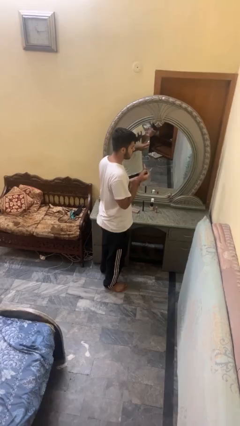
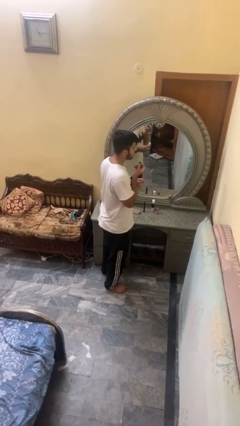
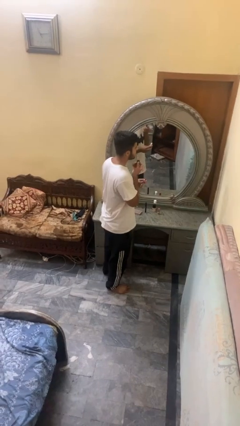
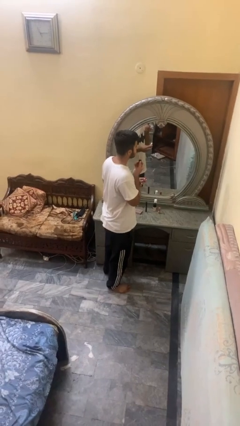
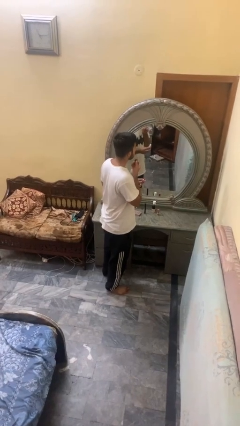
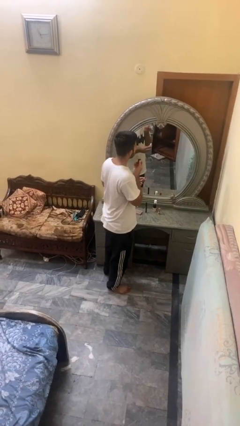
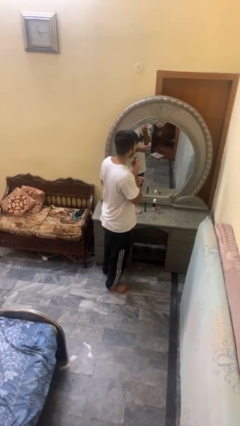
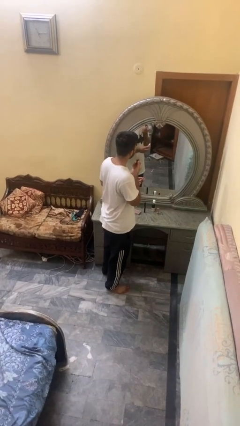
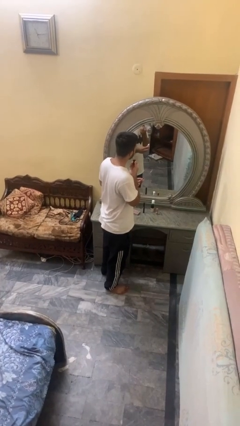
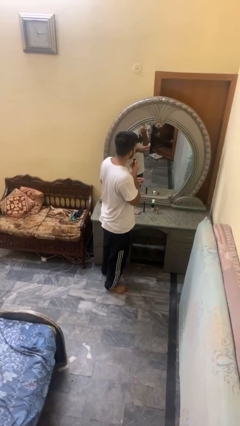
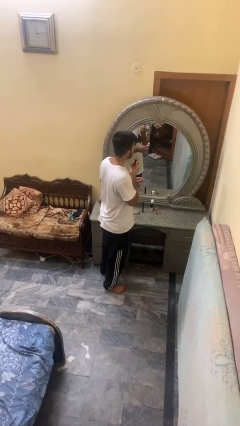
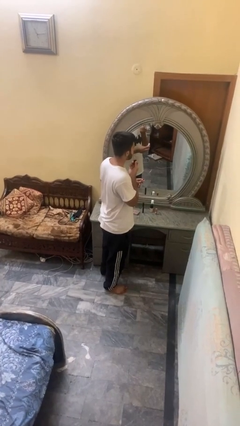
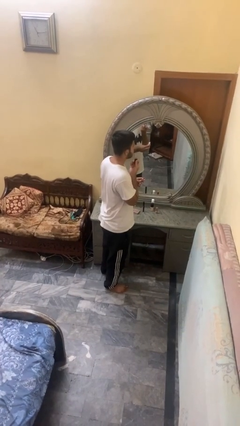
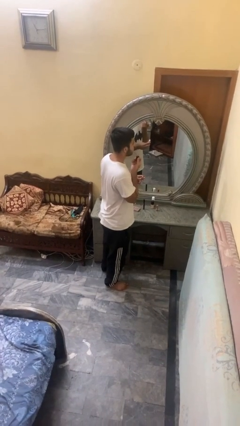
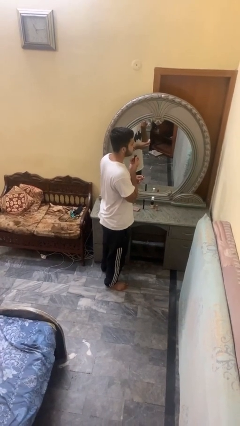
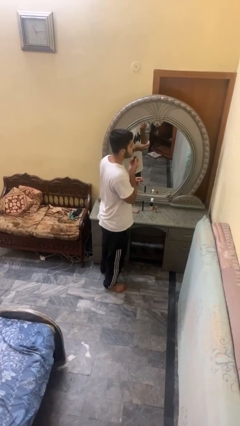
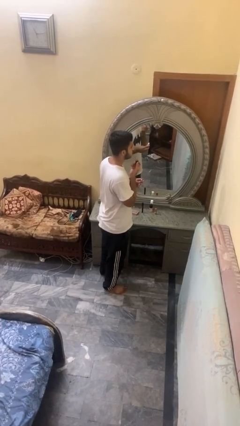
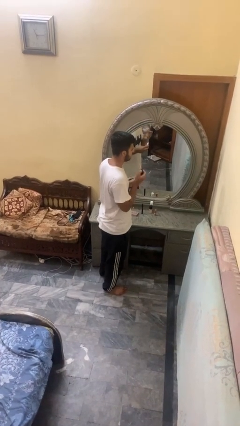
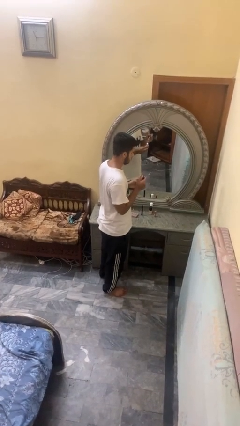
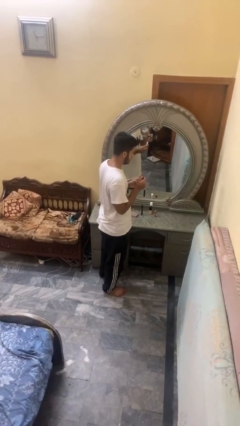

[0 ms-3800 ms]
person applies lip makeup

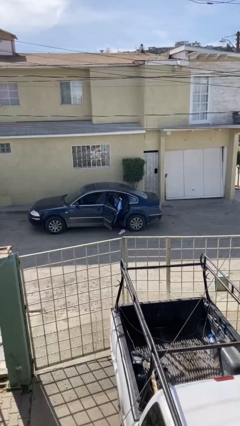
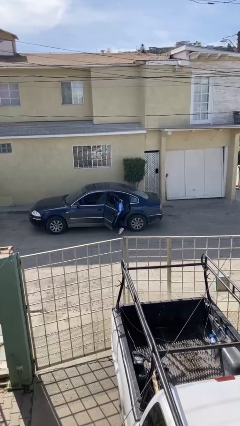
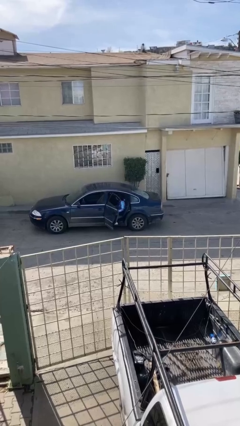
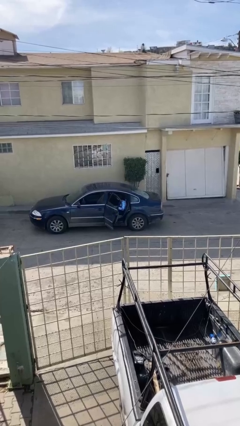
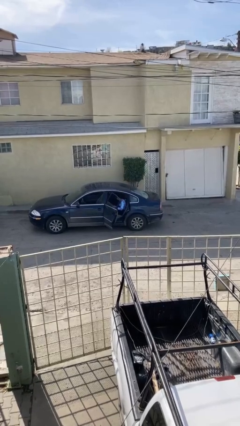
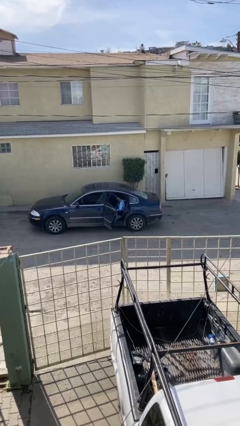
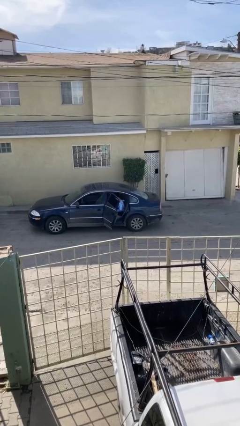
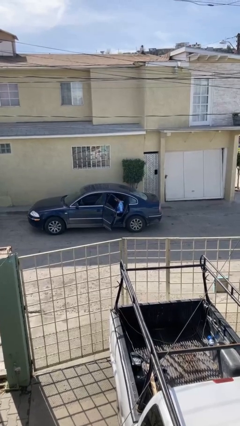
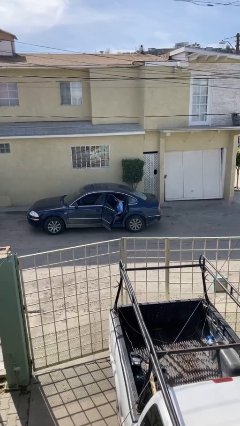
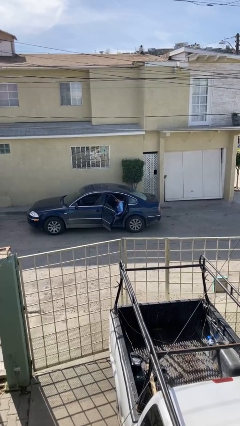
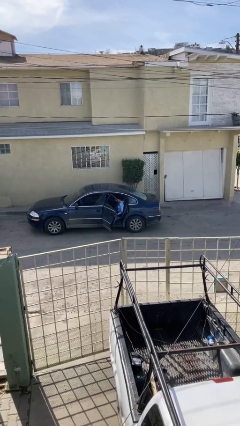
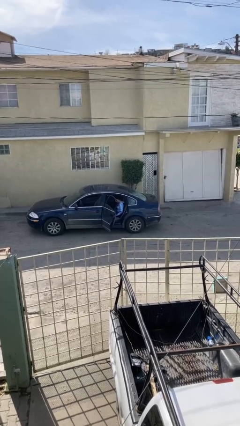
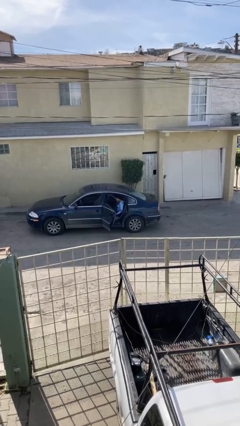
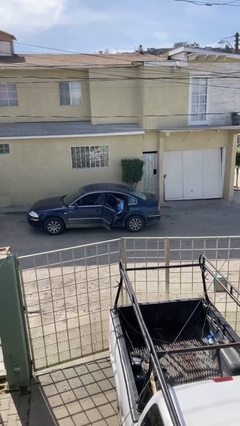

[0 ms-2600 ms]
person enters car

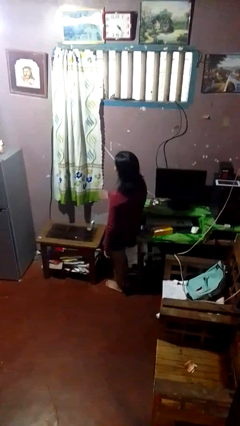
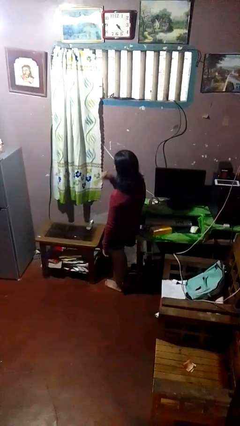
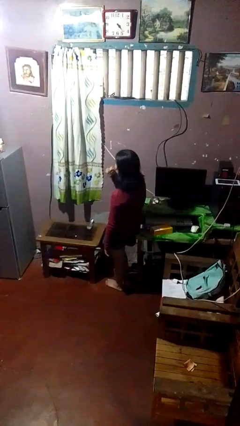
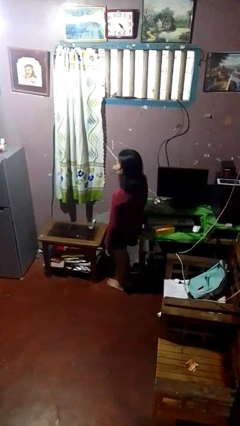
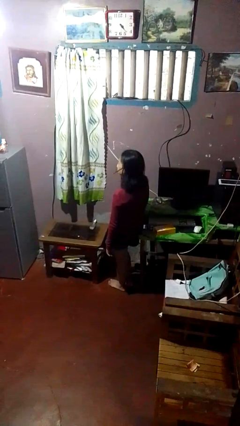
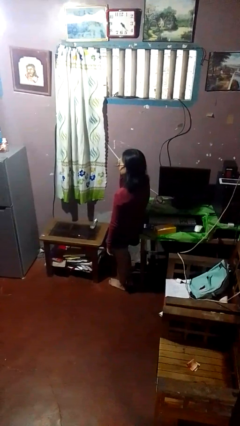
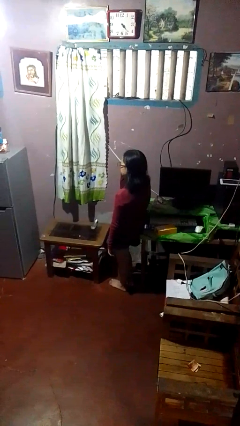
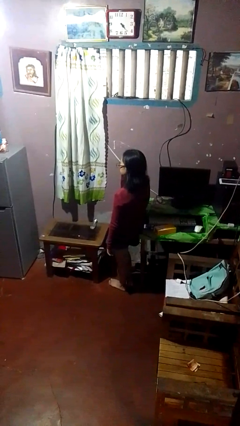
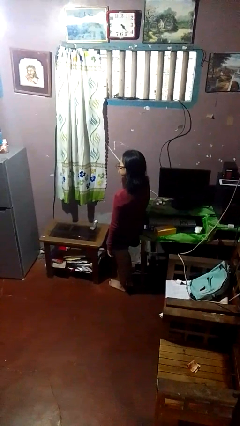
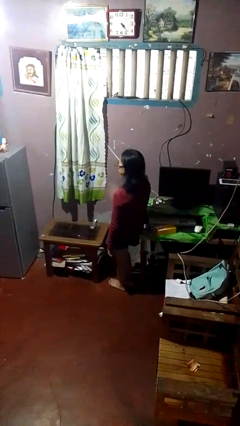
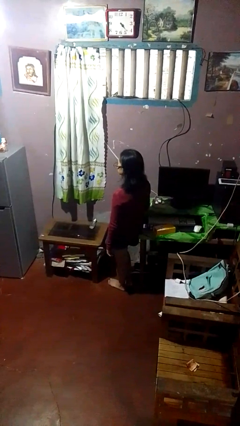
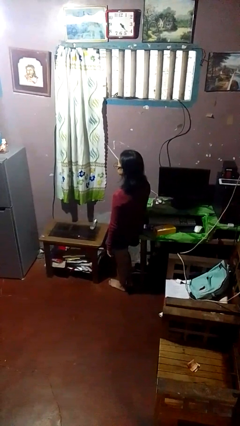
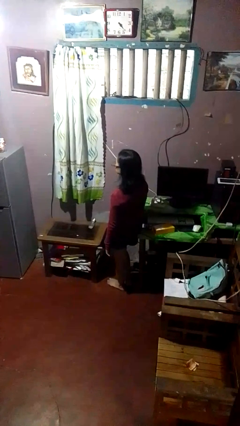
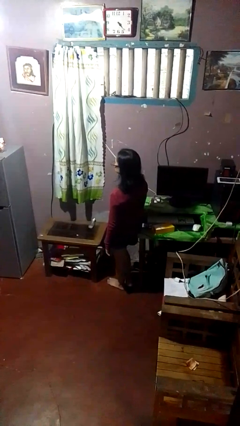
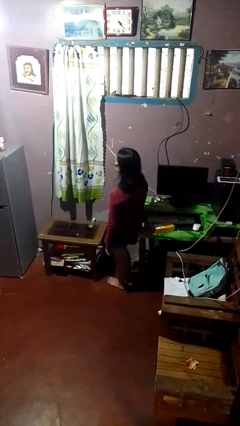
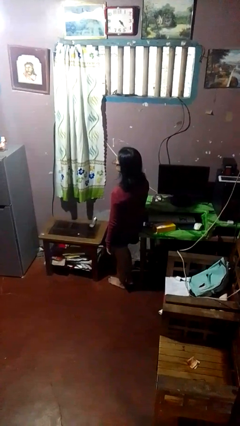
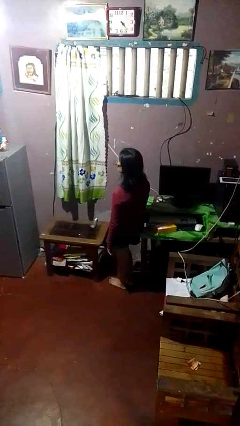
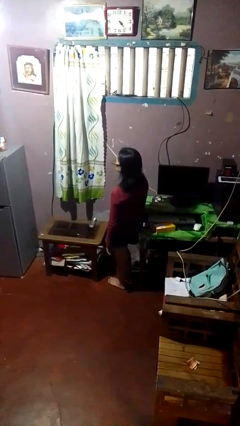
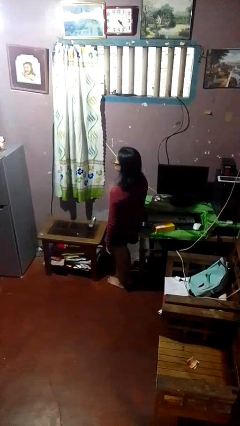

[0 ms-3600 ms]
person puts on glasses

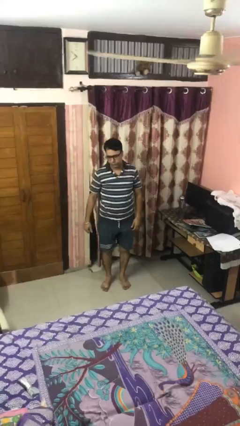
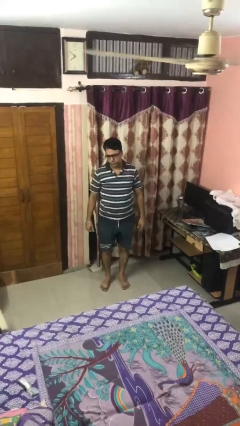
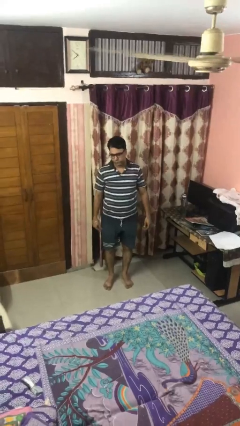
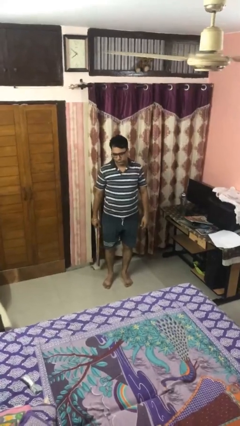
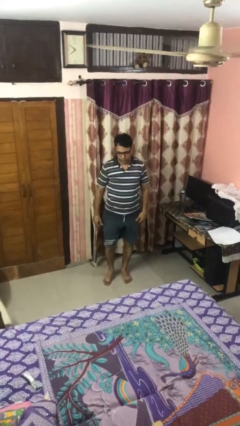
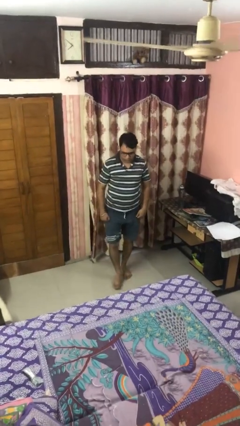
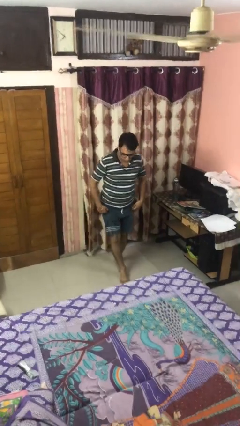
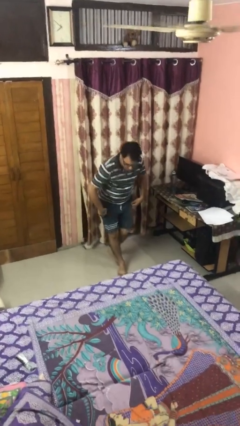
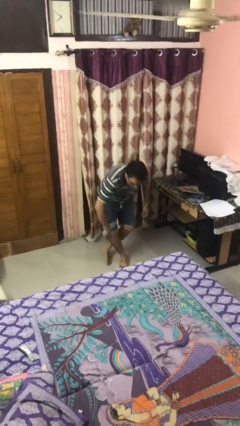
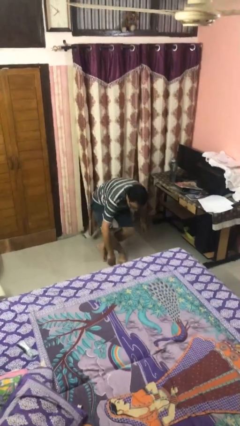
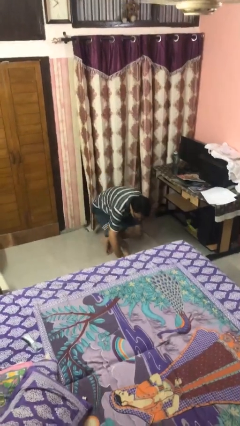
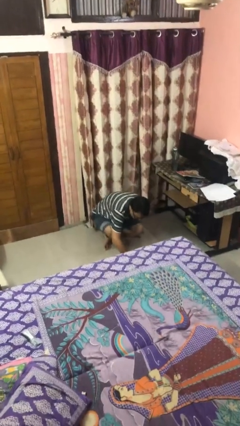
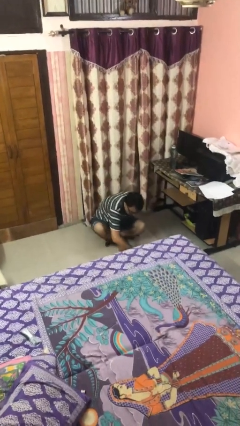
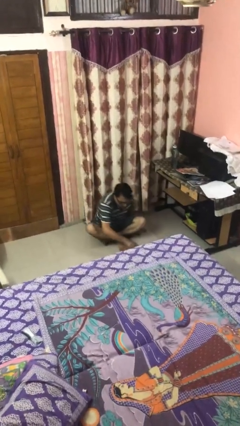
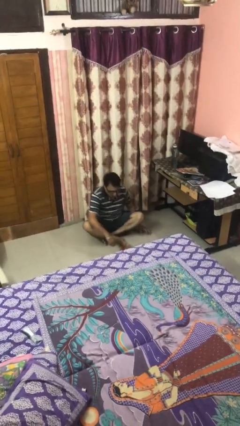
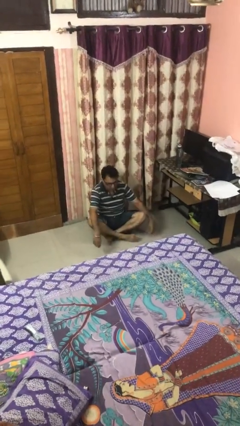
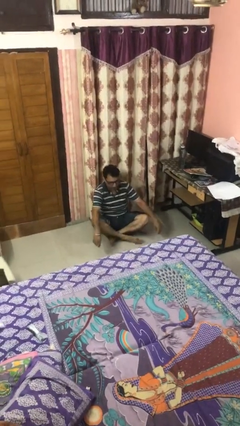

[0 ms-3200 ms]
person sits crisscross

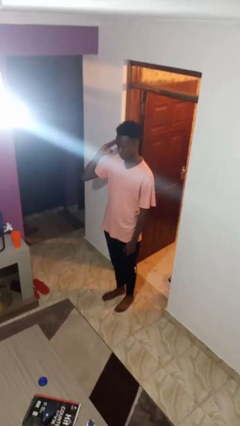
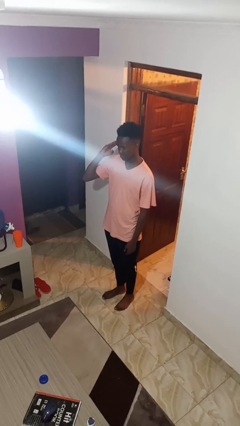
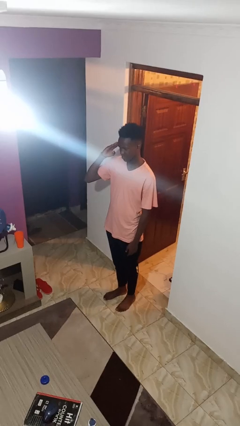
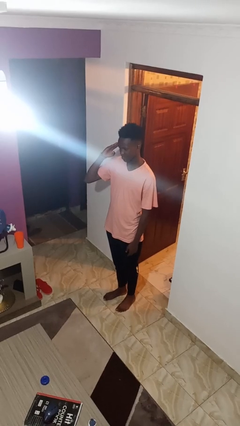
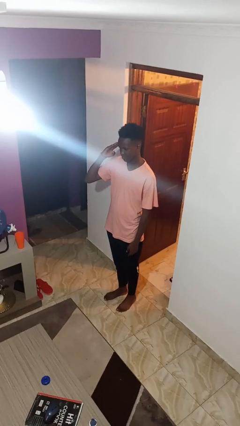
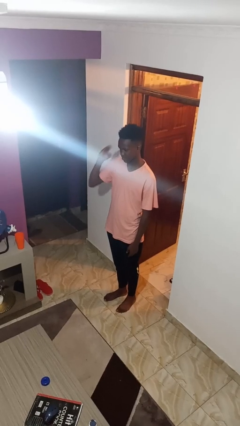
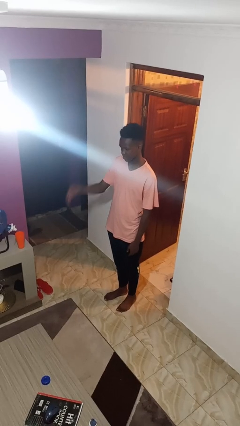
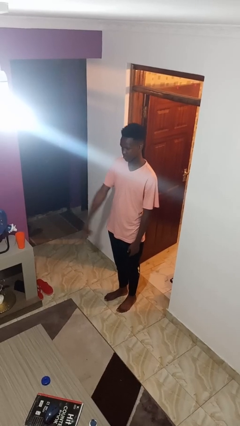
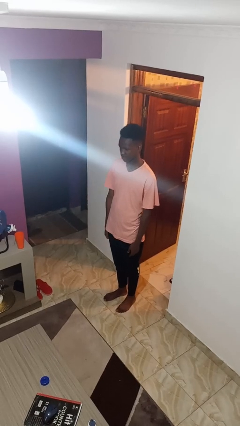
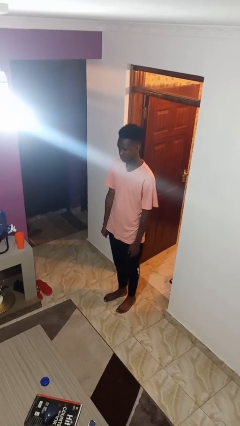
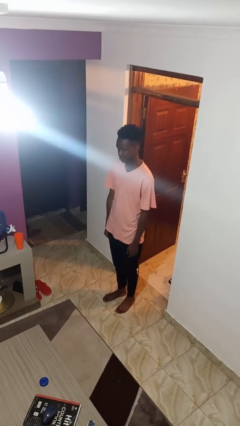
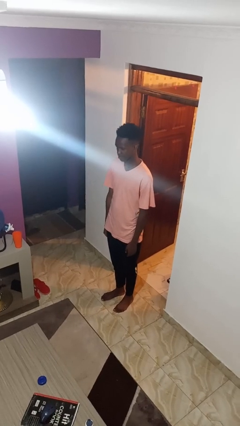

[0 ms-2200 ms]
person salutes

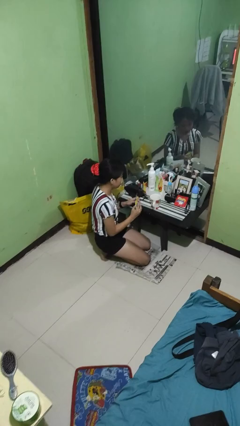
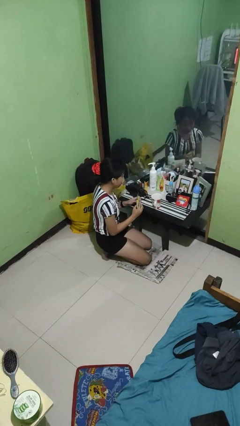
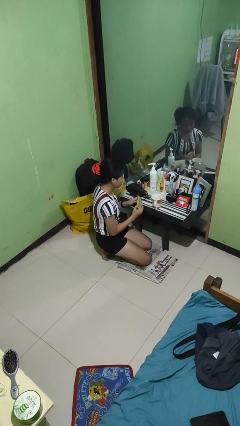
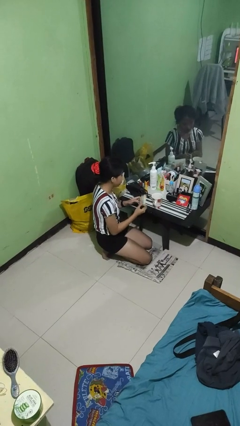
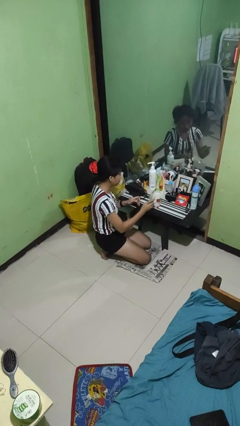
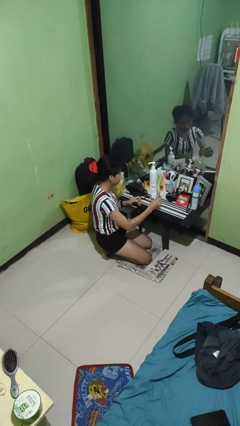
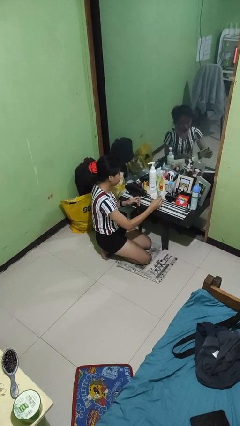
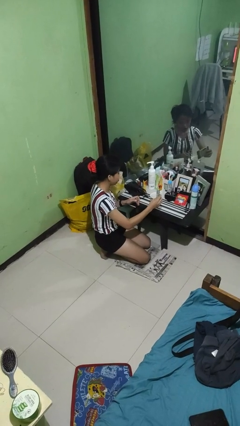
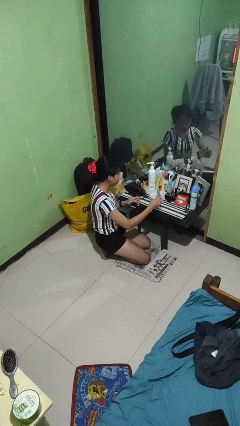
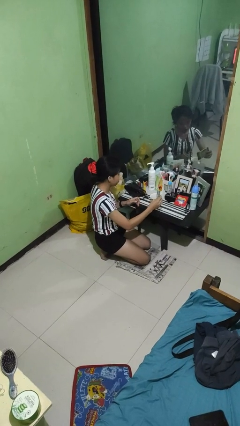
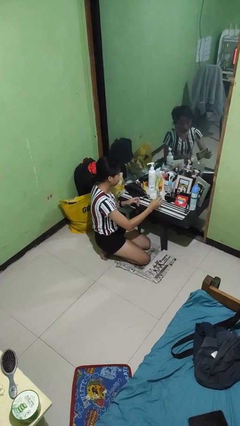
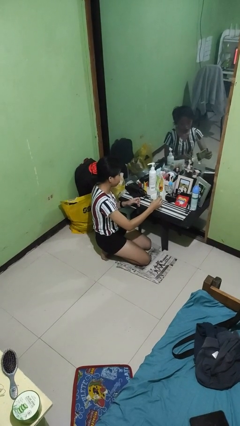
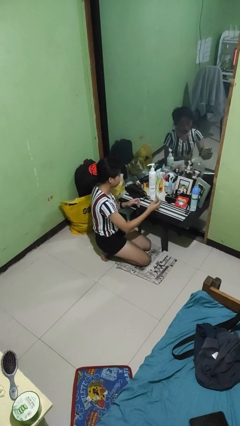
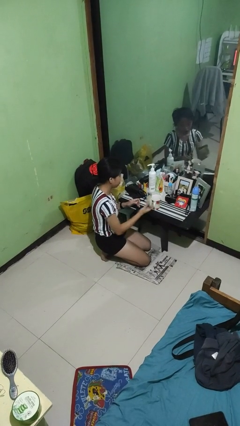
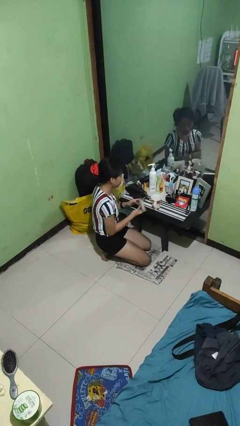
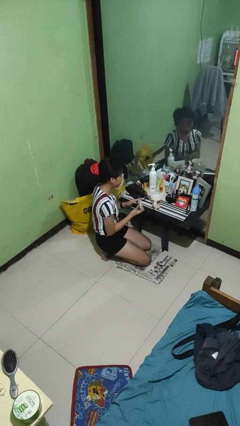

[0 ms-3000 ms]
person pours coffee into mug
